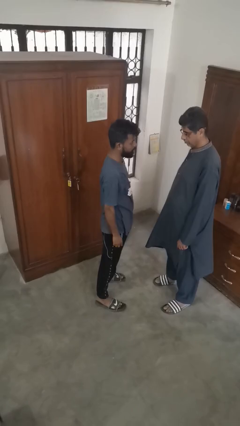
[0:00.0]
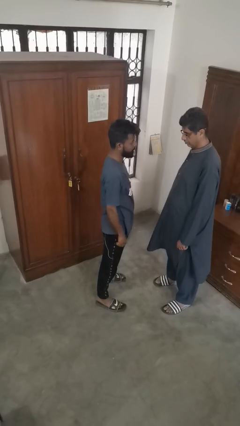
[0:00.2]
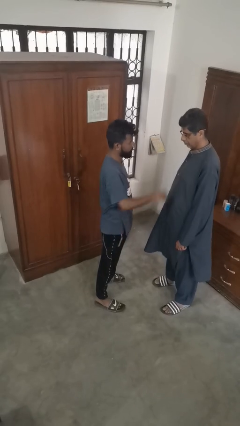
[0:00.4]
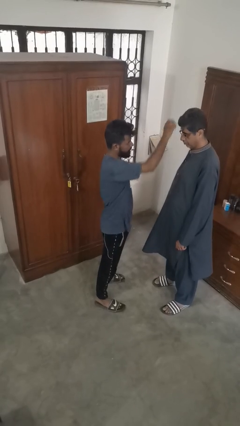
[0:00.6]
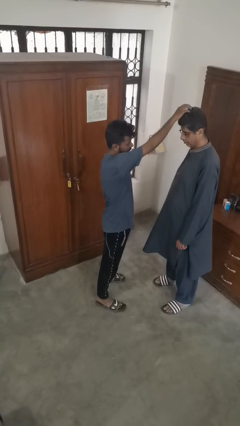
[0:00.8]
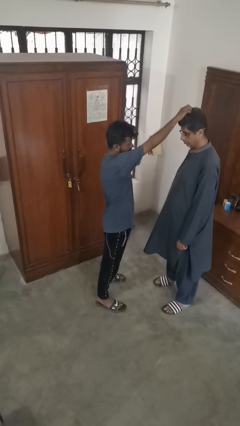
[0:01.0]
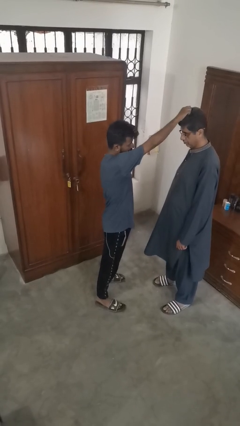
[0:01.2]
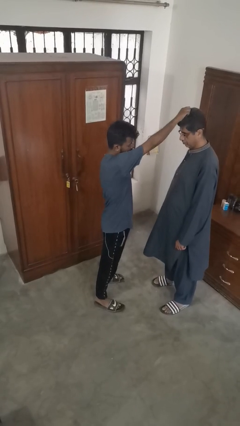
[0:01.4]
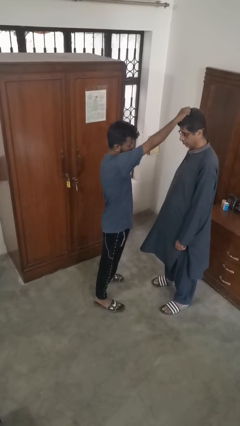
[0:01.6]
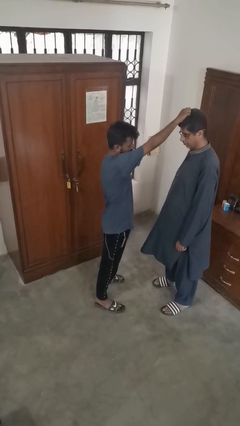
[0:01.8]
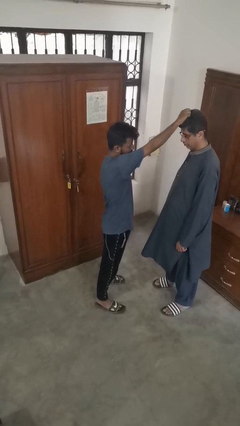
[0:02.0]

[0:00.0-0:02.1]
person grabs person by hair

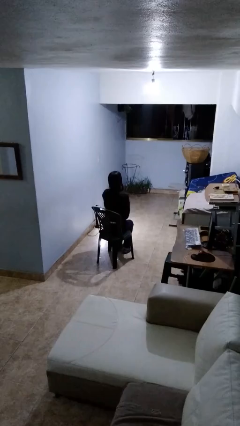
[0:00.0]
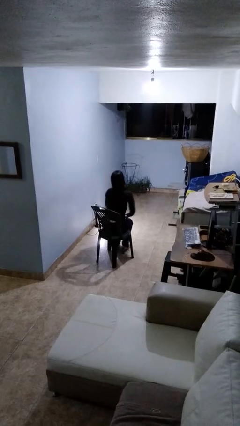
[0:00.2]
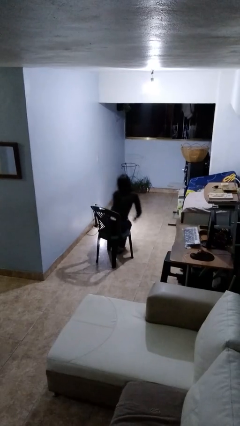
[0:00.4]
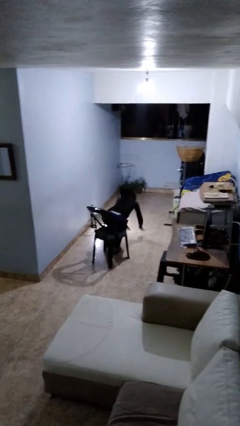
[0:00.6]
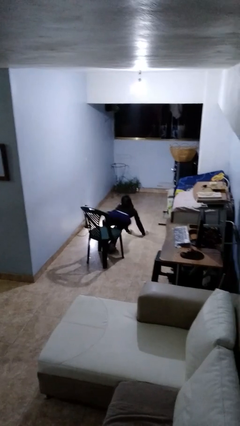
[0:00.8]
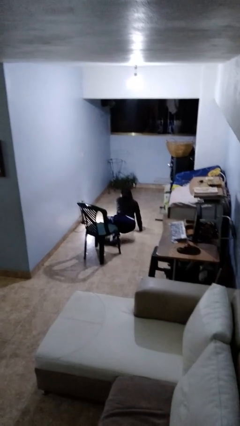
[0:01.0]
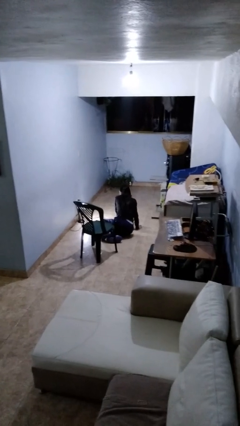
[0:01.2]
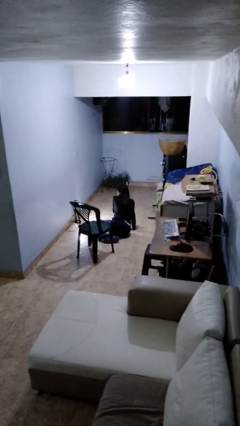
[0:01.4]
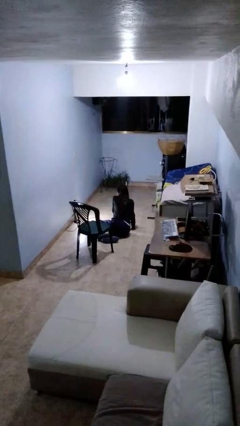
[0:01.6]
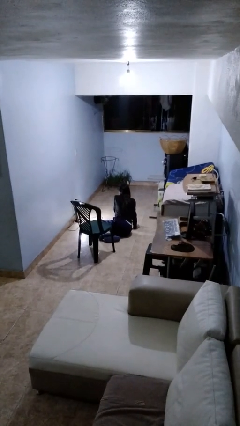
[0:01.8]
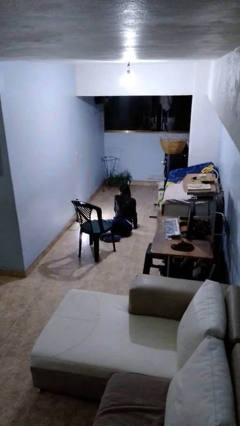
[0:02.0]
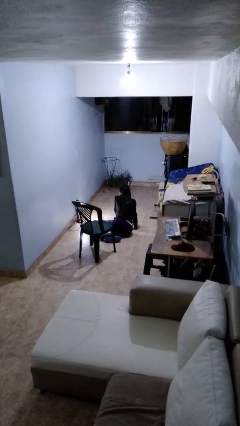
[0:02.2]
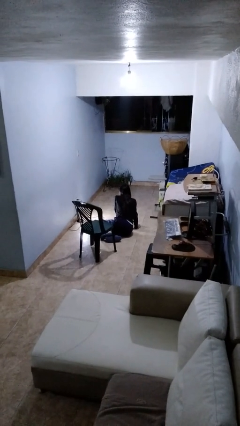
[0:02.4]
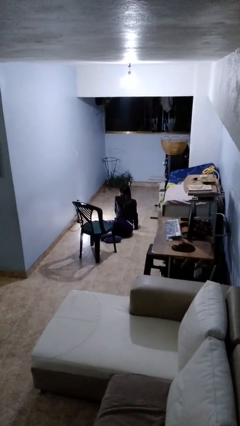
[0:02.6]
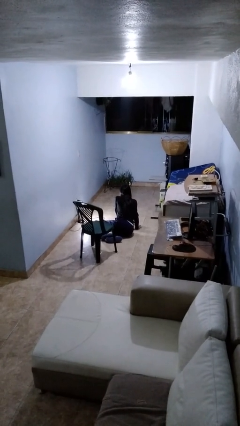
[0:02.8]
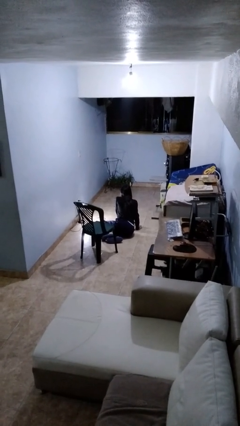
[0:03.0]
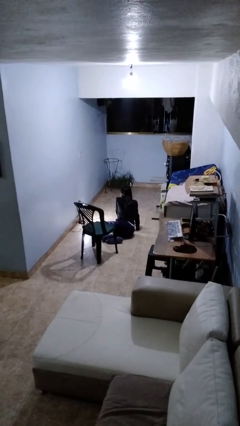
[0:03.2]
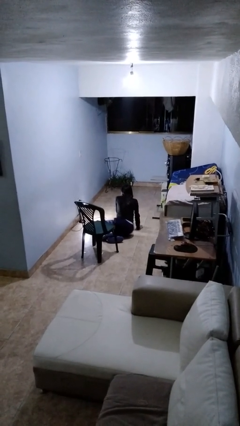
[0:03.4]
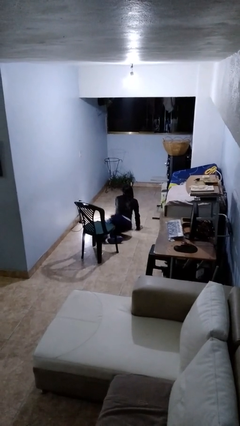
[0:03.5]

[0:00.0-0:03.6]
person falls from chair

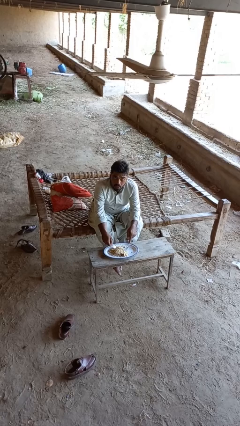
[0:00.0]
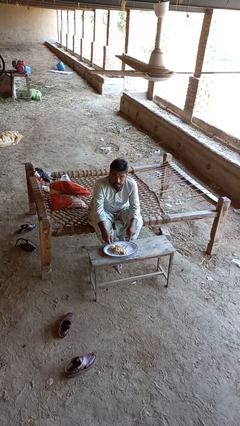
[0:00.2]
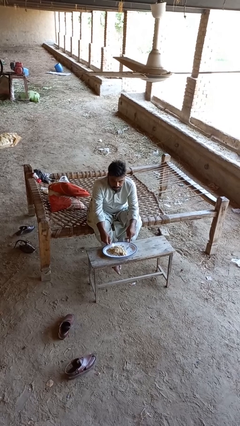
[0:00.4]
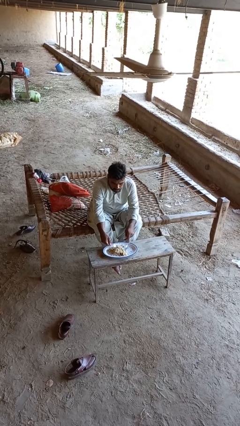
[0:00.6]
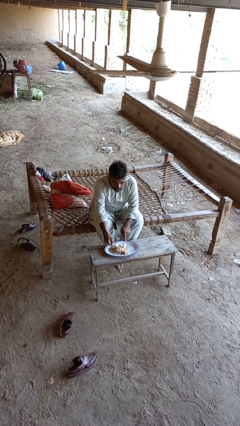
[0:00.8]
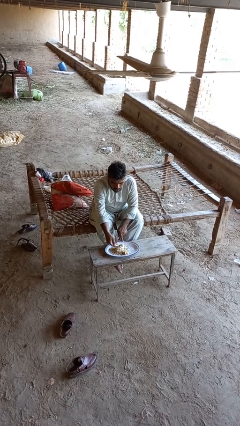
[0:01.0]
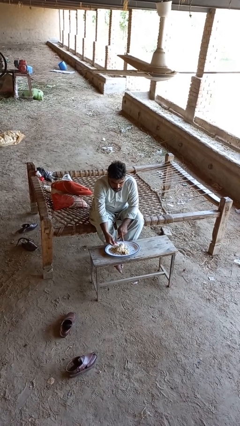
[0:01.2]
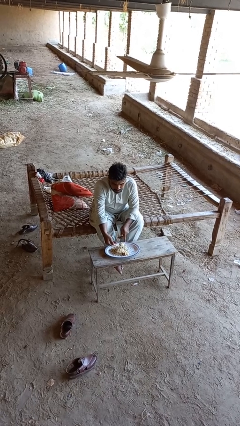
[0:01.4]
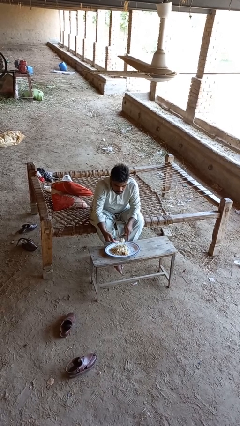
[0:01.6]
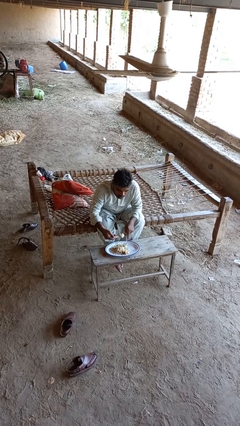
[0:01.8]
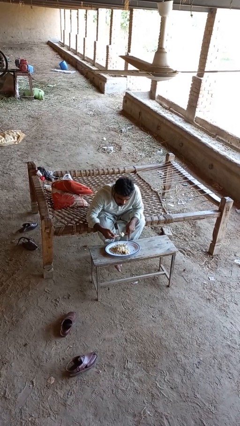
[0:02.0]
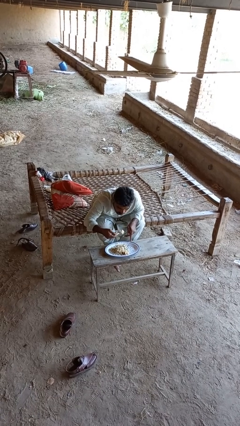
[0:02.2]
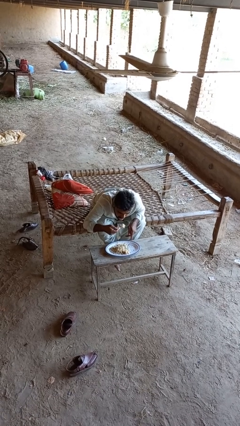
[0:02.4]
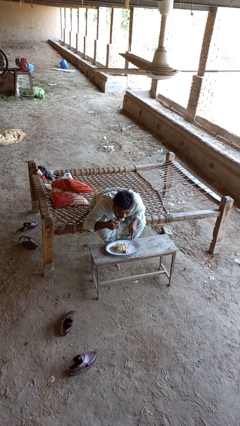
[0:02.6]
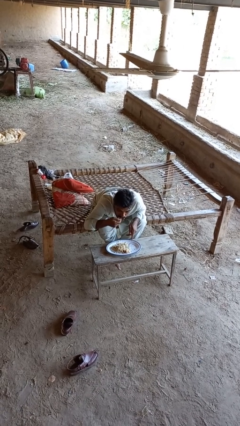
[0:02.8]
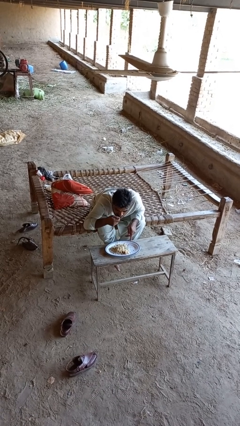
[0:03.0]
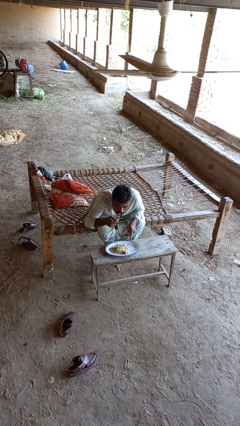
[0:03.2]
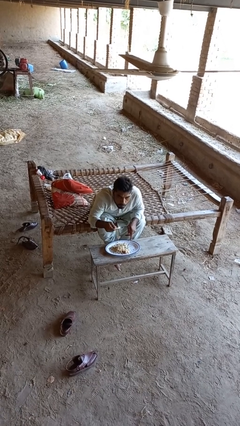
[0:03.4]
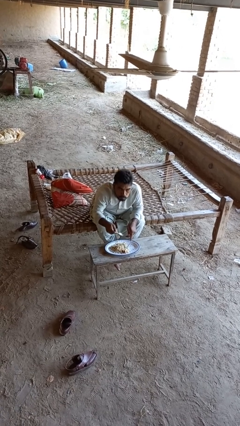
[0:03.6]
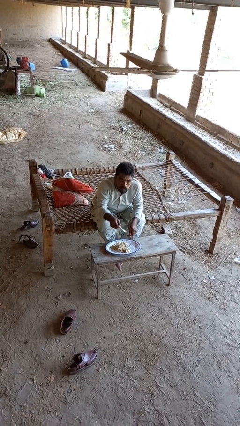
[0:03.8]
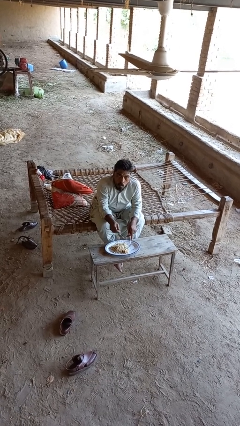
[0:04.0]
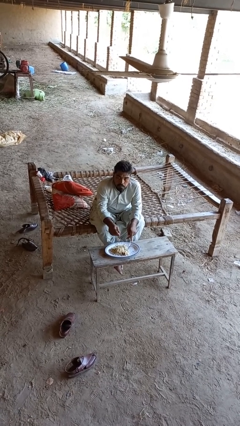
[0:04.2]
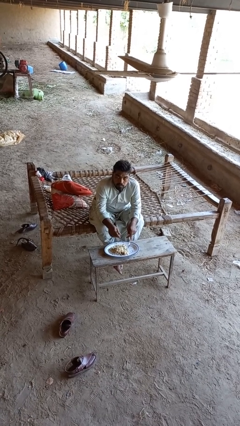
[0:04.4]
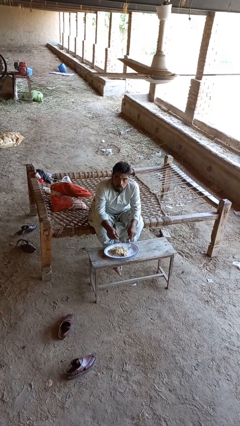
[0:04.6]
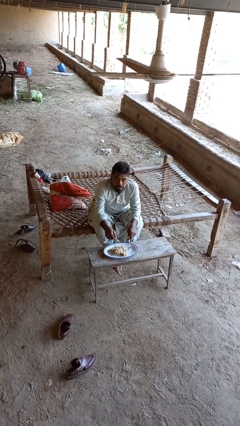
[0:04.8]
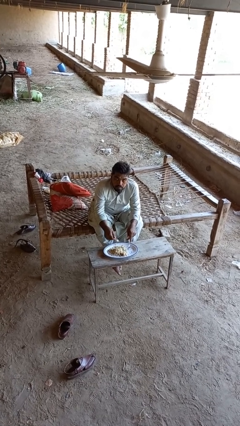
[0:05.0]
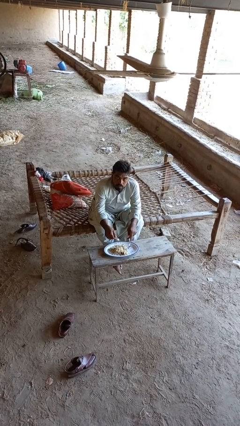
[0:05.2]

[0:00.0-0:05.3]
person eats with utensil

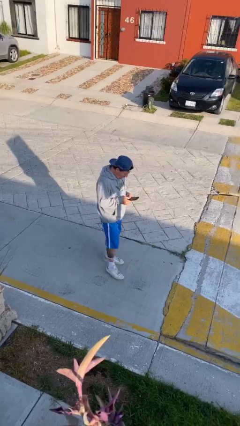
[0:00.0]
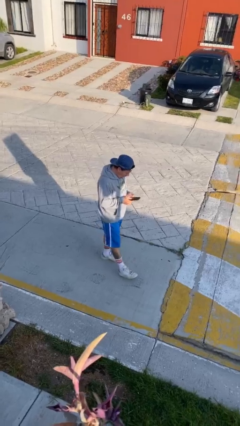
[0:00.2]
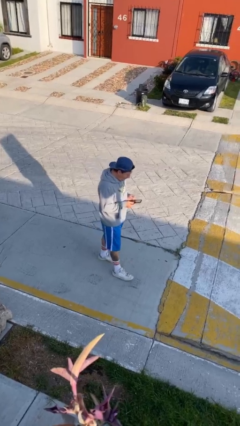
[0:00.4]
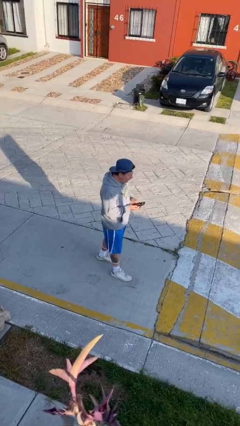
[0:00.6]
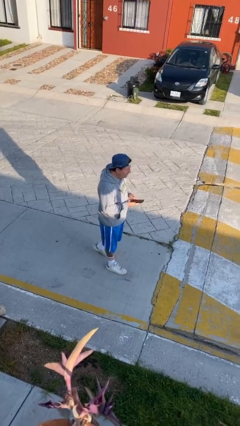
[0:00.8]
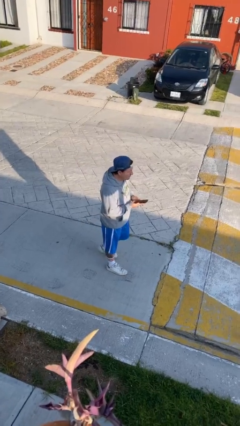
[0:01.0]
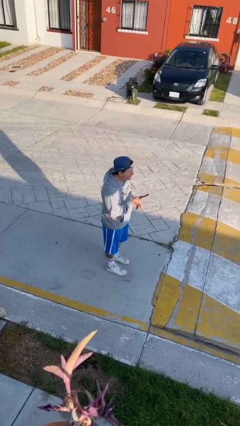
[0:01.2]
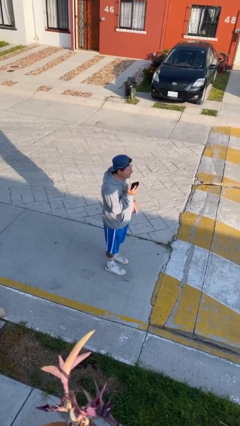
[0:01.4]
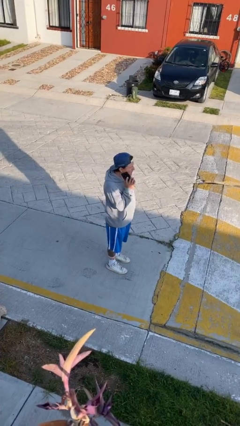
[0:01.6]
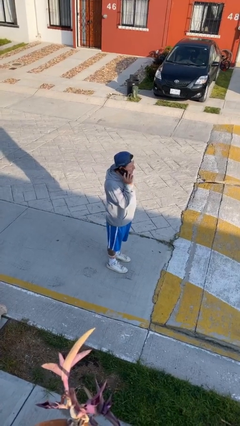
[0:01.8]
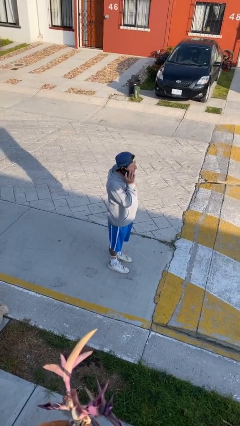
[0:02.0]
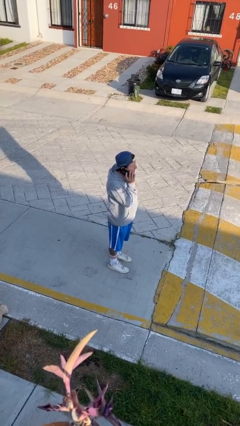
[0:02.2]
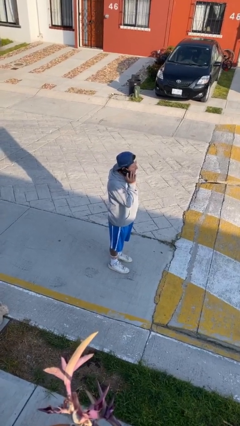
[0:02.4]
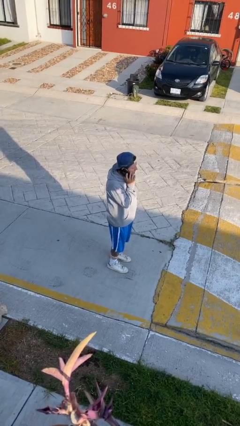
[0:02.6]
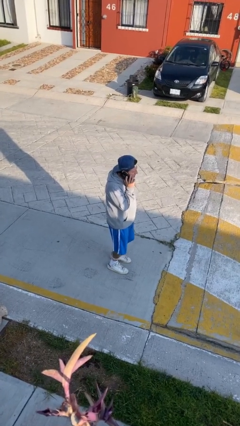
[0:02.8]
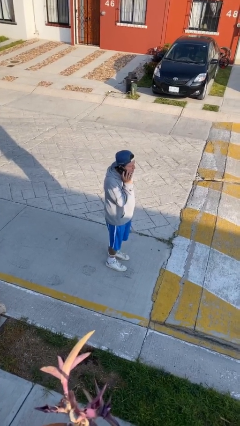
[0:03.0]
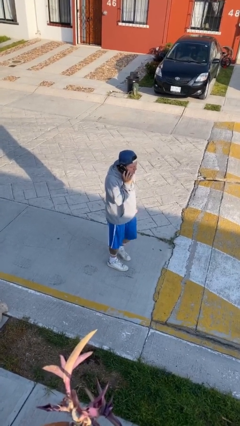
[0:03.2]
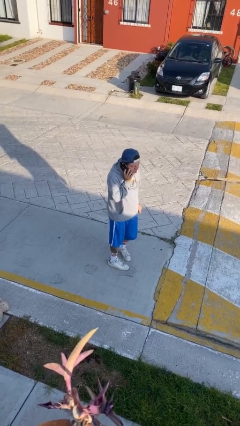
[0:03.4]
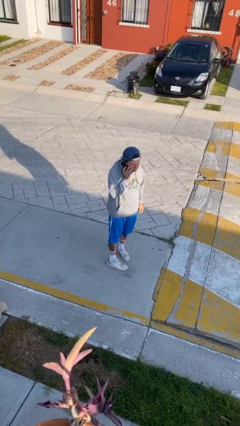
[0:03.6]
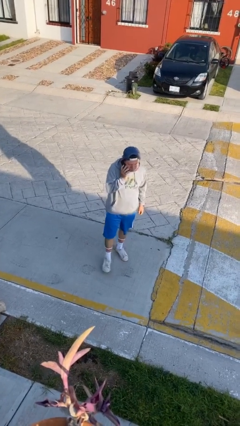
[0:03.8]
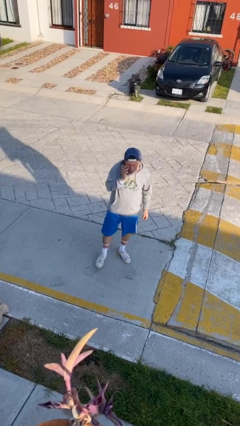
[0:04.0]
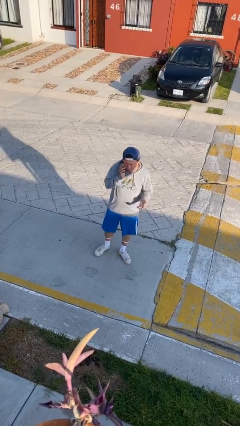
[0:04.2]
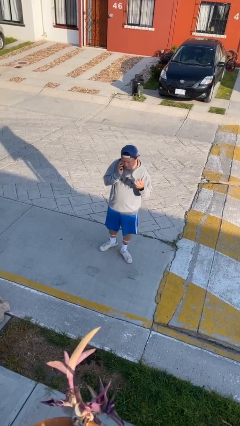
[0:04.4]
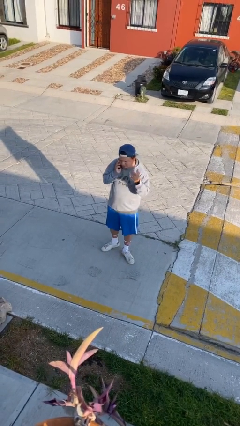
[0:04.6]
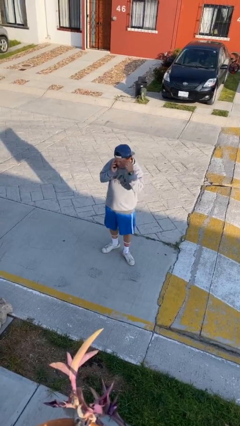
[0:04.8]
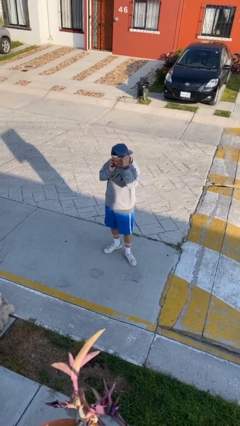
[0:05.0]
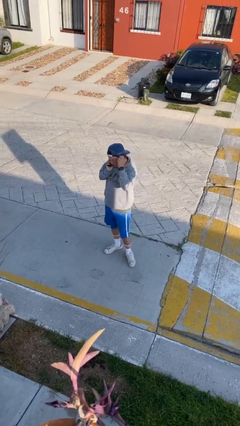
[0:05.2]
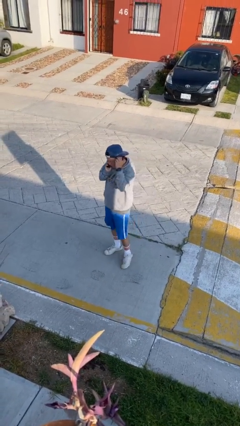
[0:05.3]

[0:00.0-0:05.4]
person talks on phone

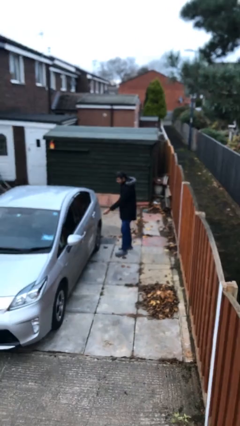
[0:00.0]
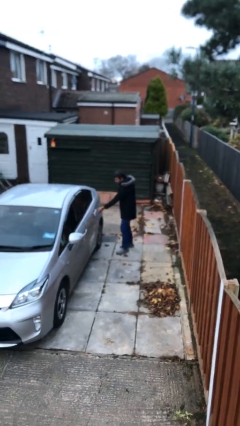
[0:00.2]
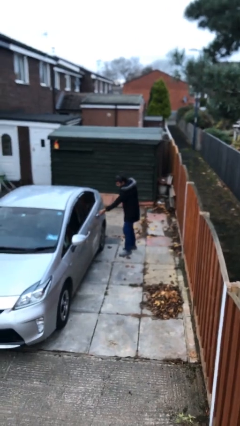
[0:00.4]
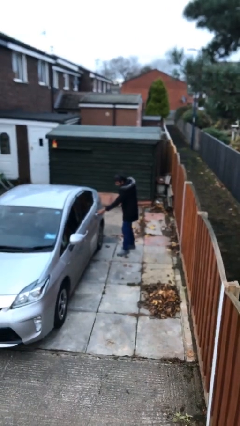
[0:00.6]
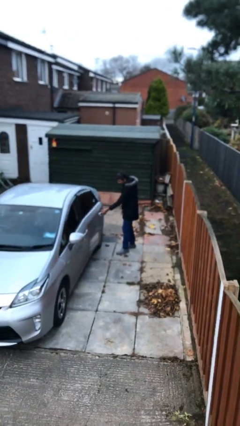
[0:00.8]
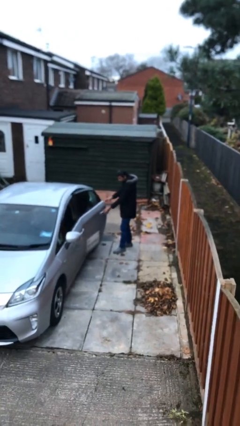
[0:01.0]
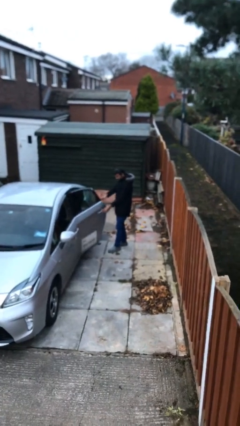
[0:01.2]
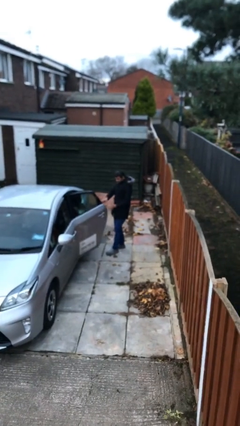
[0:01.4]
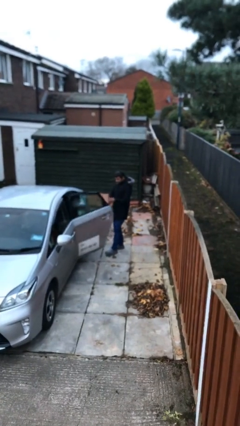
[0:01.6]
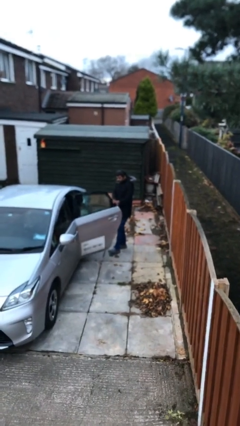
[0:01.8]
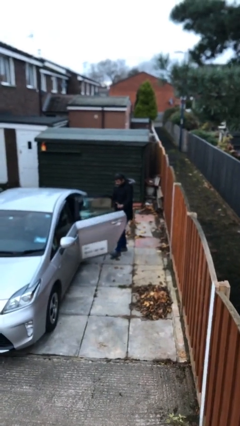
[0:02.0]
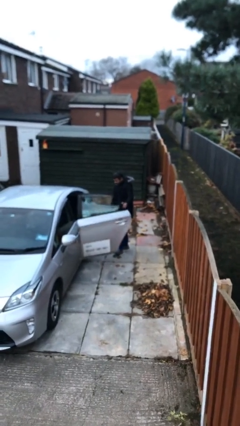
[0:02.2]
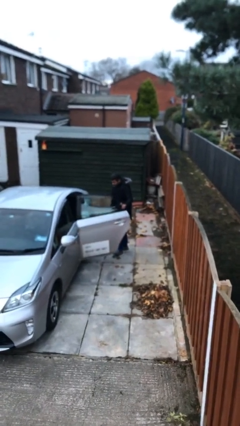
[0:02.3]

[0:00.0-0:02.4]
person opens car door
